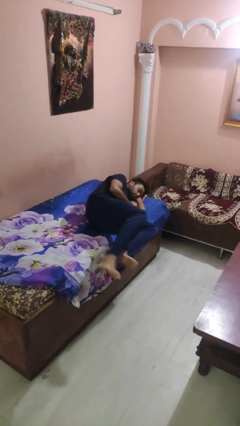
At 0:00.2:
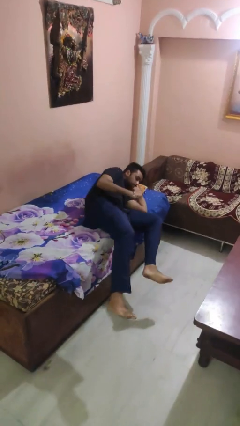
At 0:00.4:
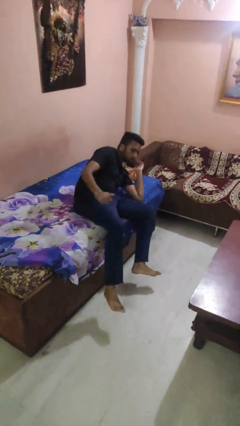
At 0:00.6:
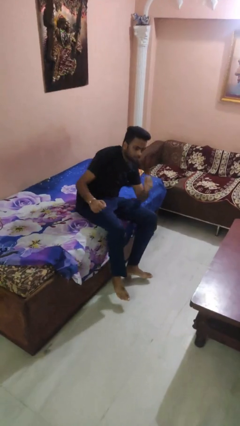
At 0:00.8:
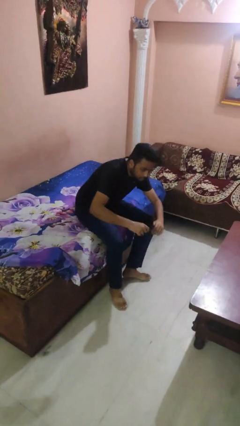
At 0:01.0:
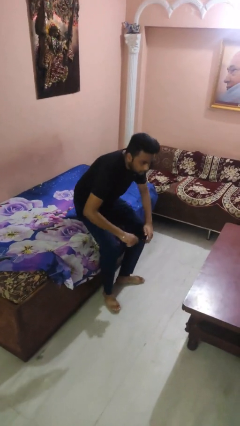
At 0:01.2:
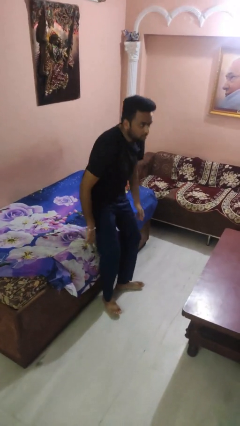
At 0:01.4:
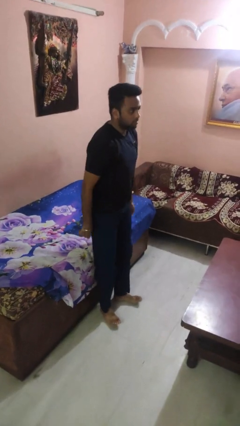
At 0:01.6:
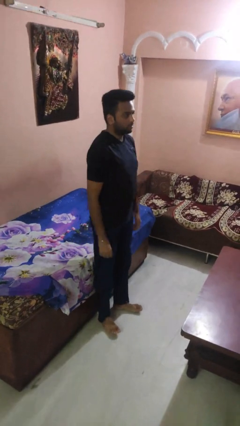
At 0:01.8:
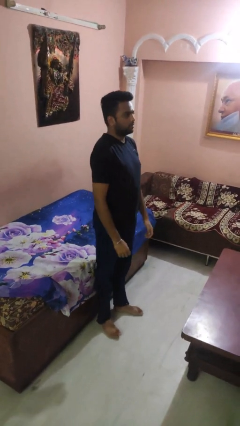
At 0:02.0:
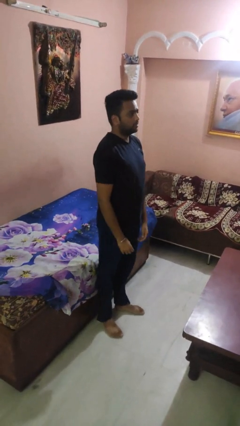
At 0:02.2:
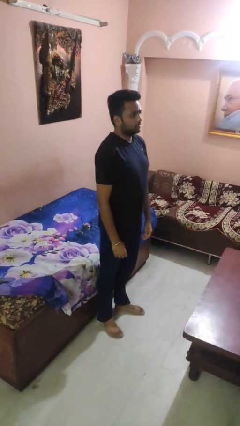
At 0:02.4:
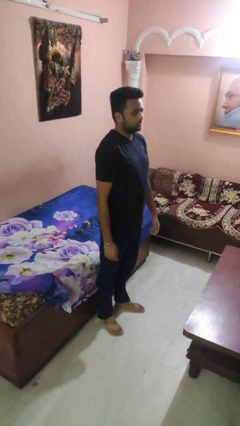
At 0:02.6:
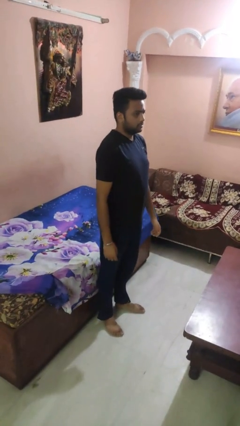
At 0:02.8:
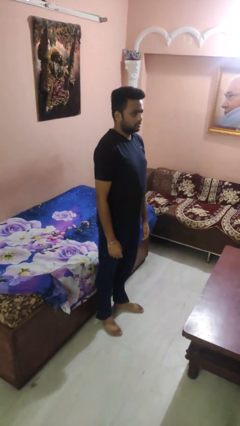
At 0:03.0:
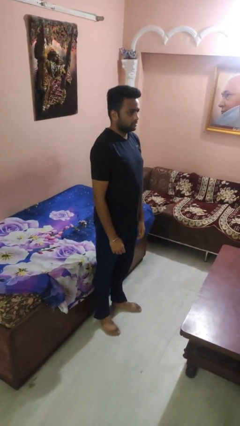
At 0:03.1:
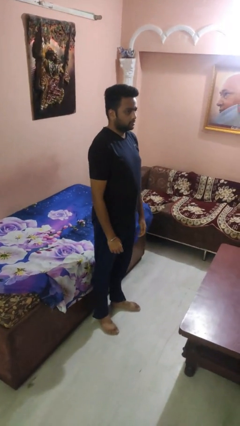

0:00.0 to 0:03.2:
person stands up

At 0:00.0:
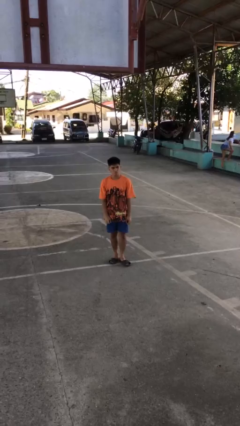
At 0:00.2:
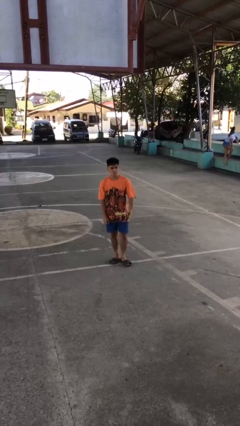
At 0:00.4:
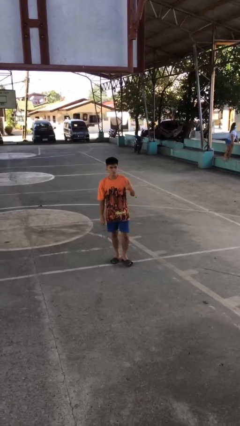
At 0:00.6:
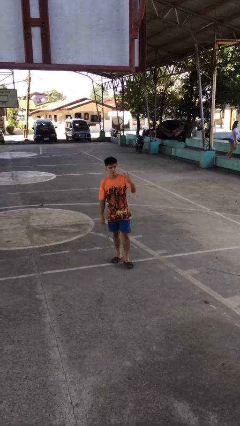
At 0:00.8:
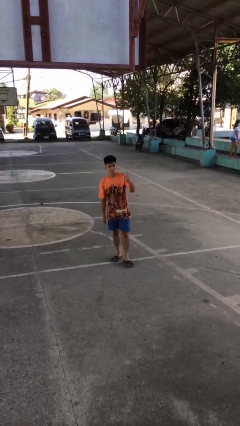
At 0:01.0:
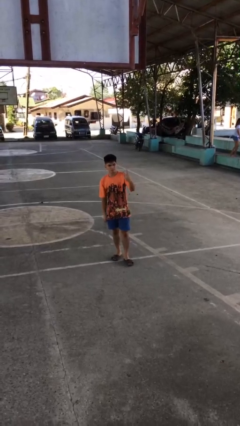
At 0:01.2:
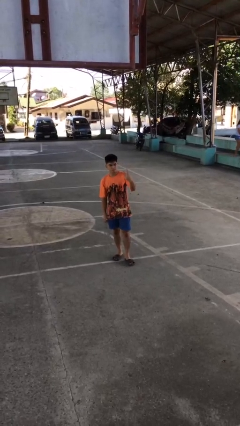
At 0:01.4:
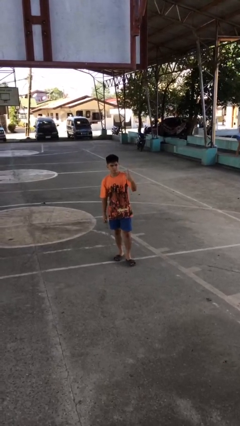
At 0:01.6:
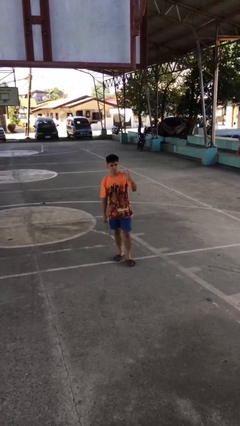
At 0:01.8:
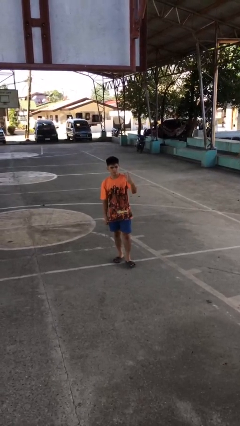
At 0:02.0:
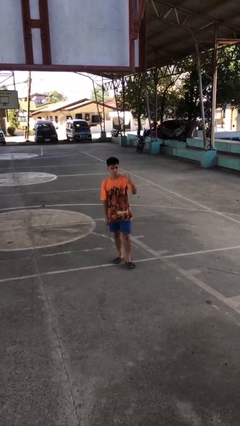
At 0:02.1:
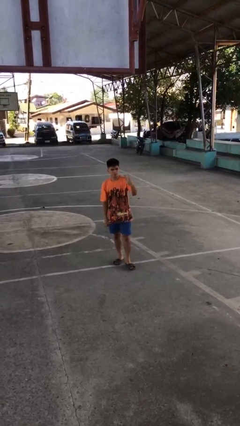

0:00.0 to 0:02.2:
person gestures peace

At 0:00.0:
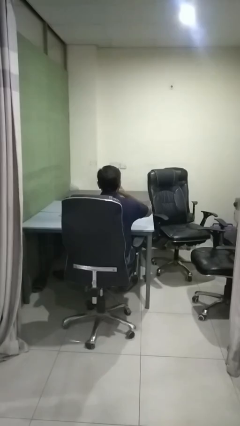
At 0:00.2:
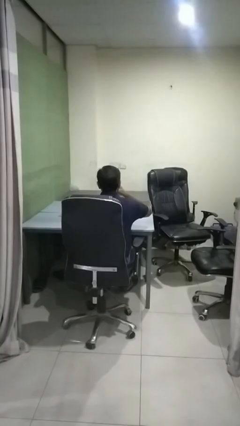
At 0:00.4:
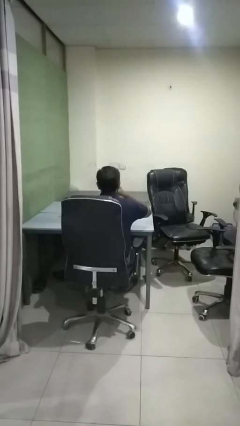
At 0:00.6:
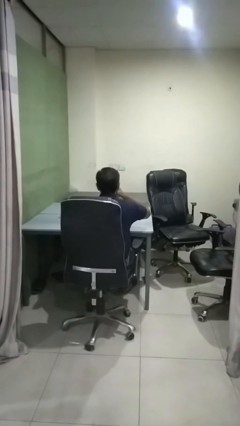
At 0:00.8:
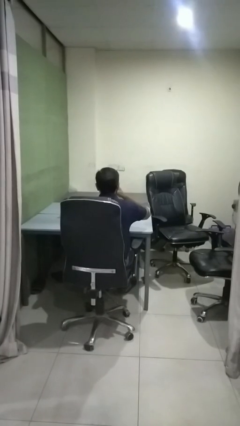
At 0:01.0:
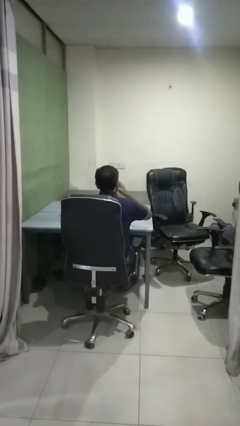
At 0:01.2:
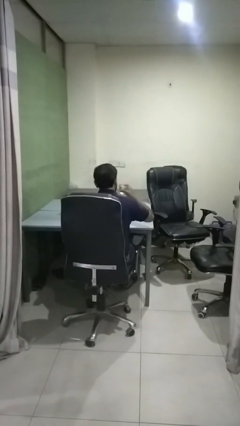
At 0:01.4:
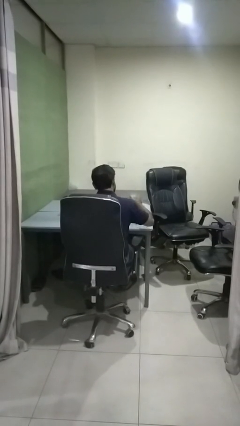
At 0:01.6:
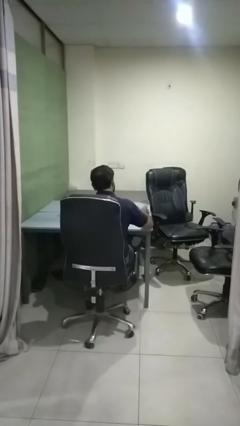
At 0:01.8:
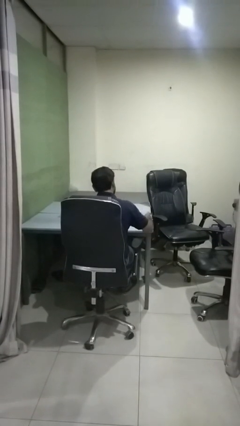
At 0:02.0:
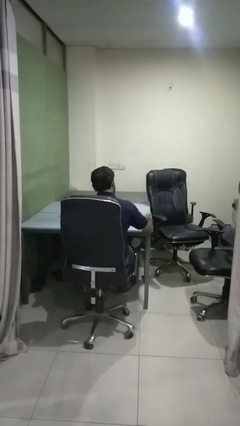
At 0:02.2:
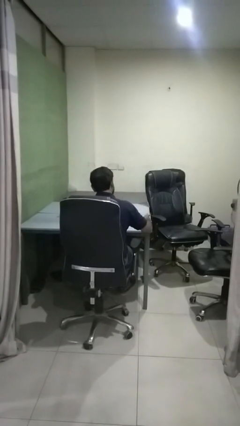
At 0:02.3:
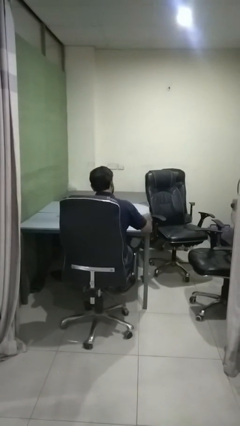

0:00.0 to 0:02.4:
person puts down object on table

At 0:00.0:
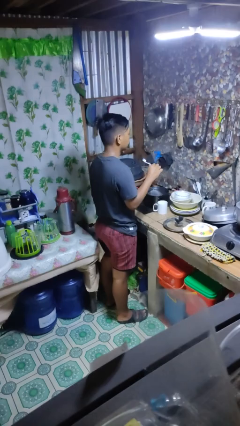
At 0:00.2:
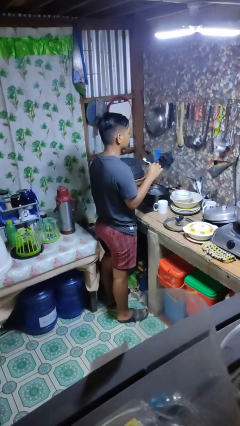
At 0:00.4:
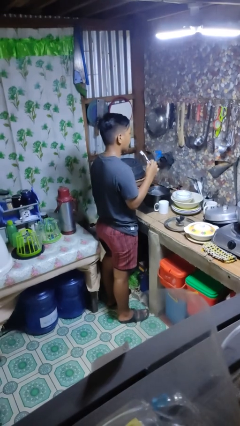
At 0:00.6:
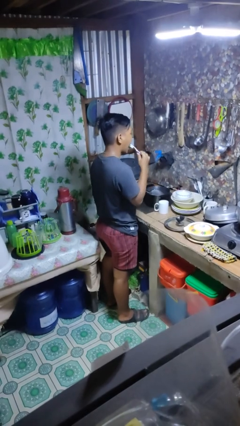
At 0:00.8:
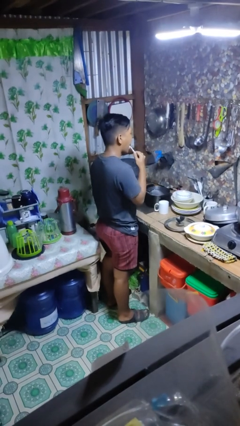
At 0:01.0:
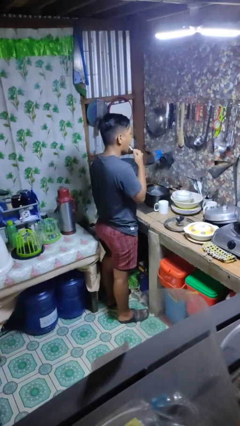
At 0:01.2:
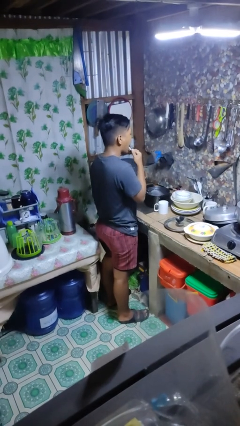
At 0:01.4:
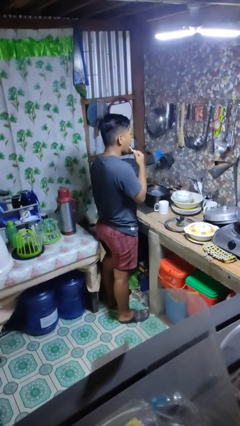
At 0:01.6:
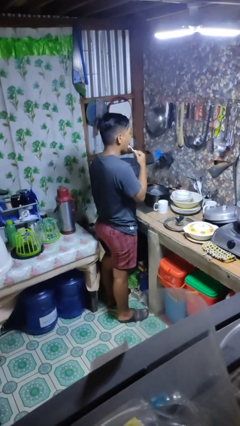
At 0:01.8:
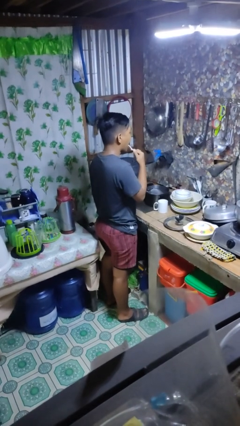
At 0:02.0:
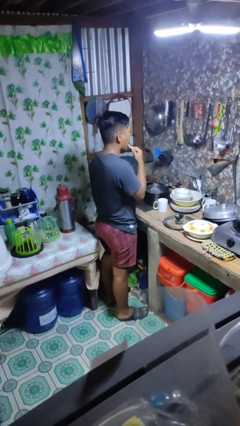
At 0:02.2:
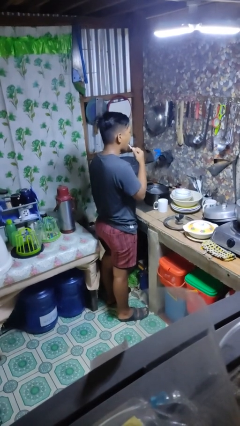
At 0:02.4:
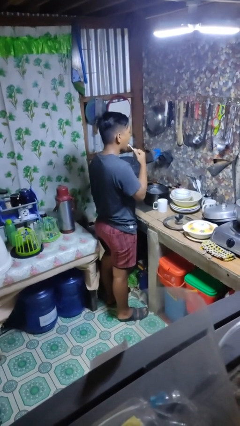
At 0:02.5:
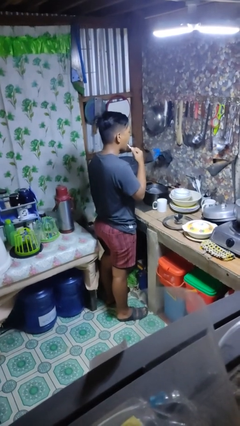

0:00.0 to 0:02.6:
person brushes teeth

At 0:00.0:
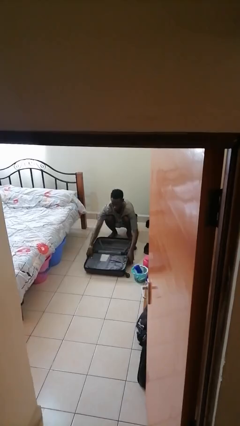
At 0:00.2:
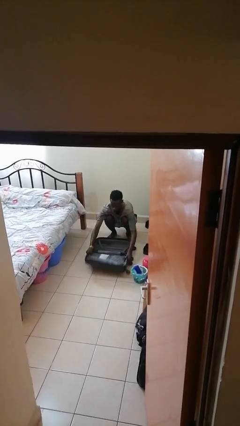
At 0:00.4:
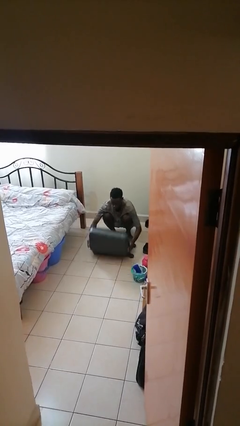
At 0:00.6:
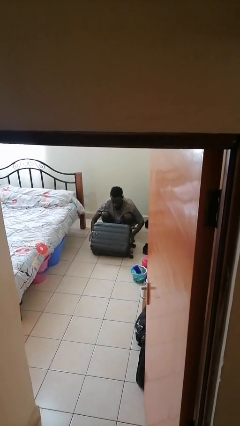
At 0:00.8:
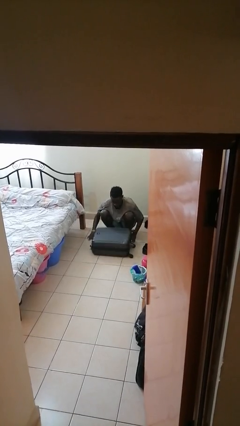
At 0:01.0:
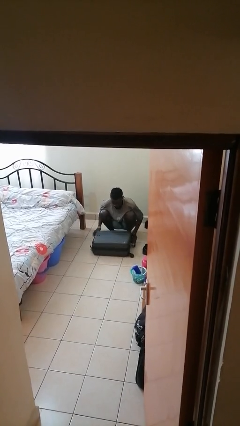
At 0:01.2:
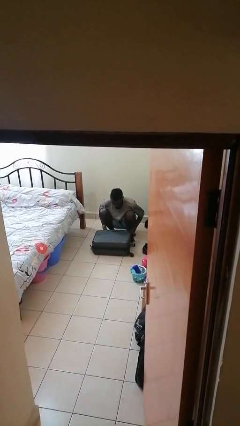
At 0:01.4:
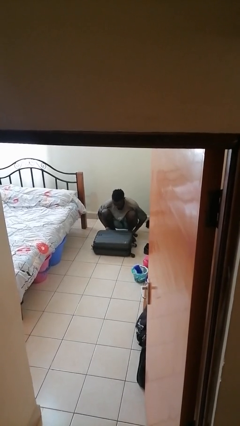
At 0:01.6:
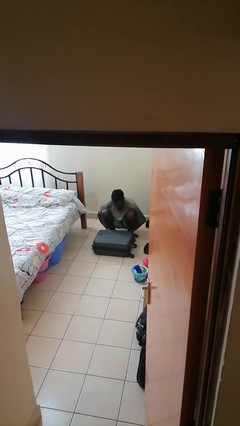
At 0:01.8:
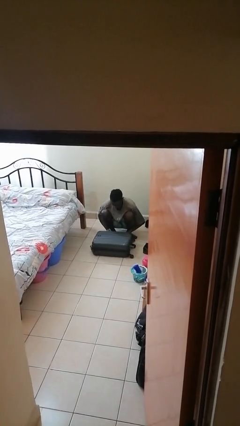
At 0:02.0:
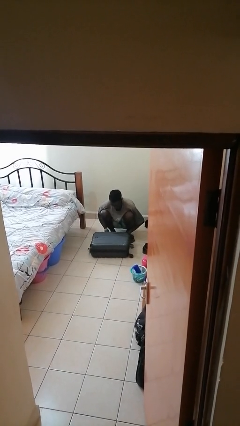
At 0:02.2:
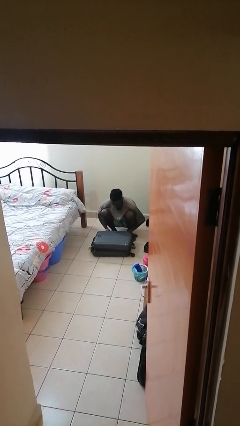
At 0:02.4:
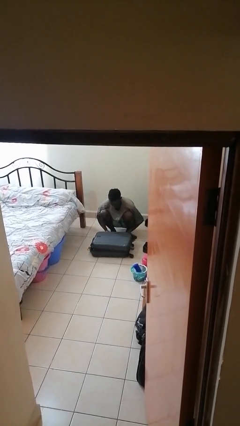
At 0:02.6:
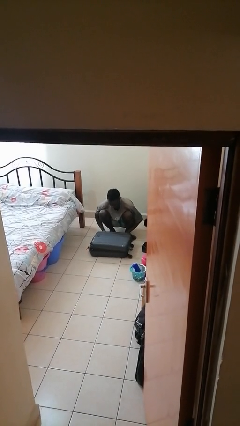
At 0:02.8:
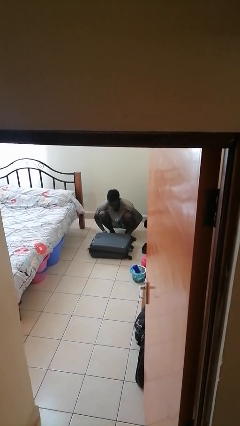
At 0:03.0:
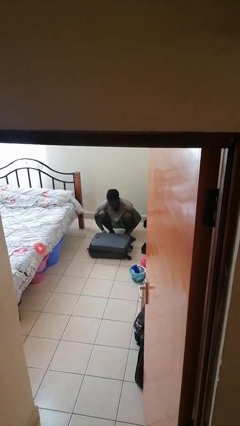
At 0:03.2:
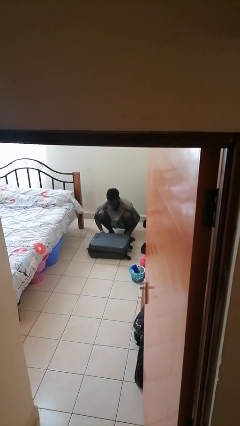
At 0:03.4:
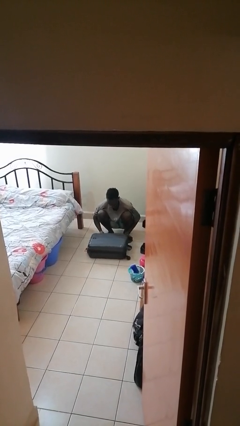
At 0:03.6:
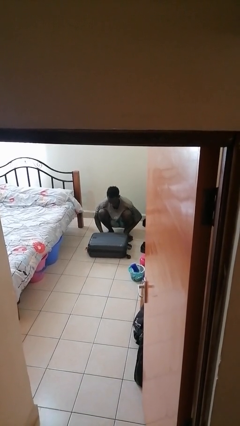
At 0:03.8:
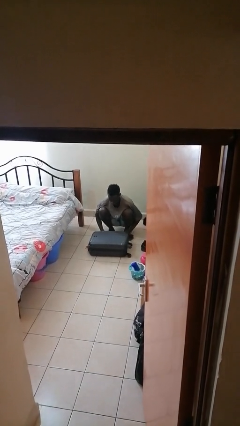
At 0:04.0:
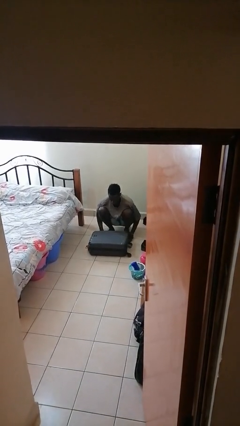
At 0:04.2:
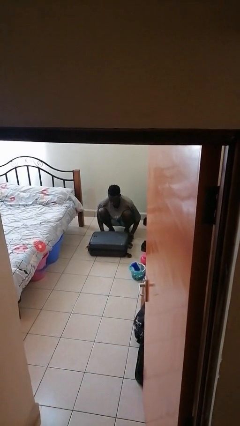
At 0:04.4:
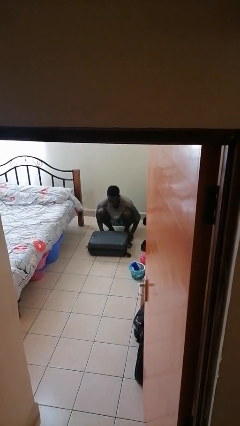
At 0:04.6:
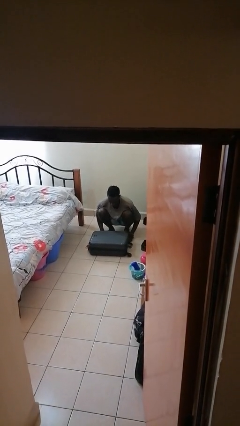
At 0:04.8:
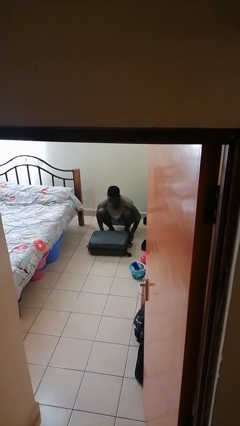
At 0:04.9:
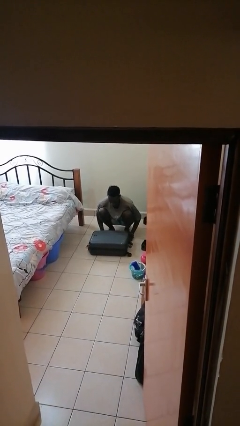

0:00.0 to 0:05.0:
person closes suitcase

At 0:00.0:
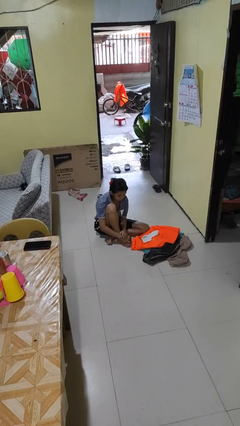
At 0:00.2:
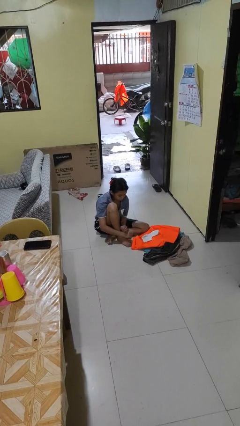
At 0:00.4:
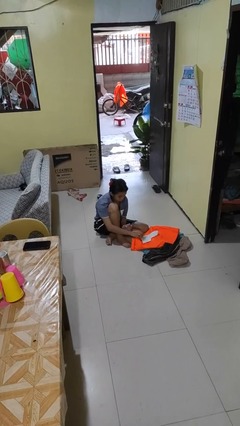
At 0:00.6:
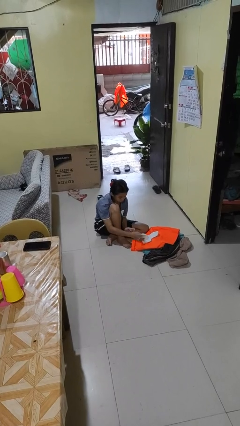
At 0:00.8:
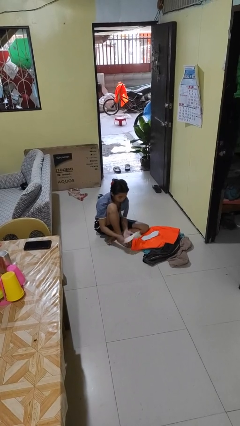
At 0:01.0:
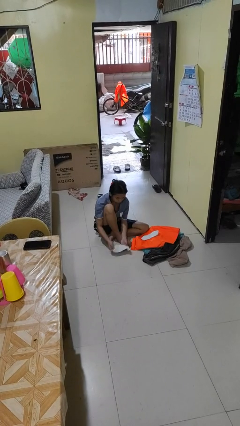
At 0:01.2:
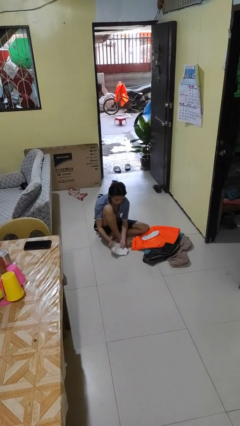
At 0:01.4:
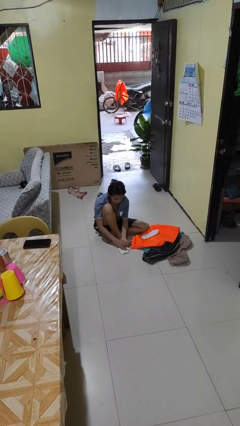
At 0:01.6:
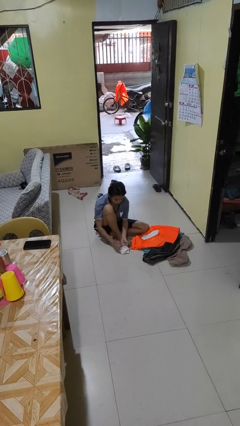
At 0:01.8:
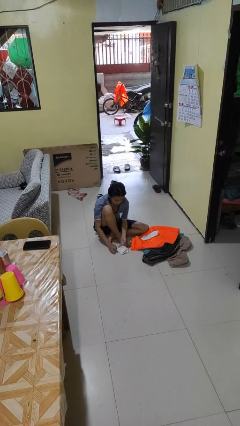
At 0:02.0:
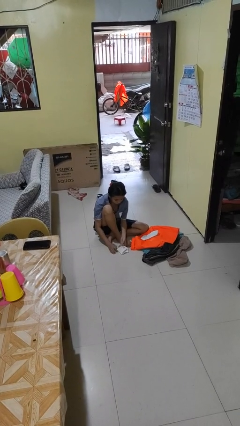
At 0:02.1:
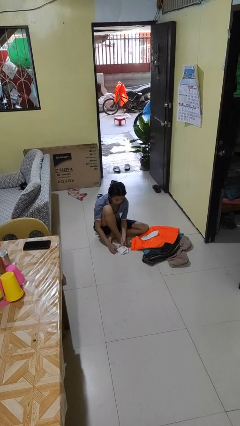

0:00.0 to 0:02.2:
person folds socks
